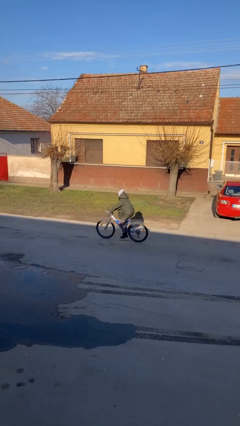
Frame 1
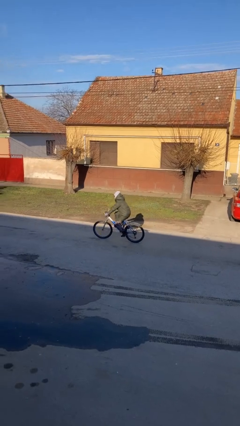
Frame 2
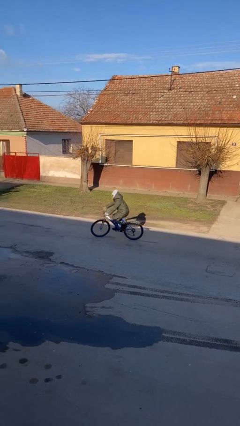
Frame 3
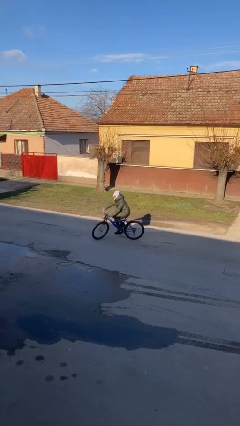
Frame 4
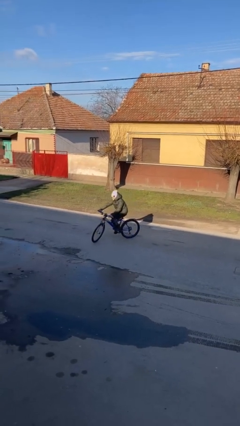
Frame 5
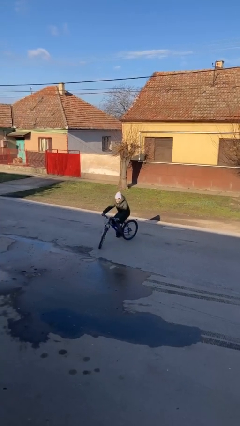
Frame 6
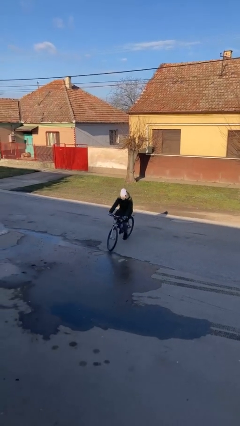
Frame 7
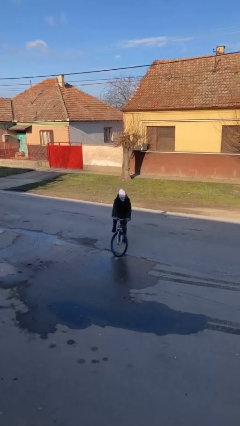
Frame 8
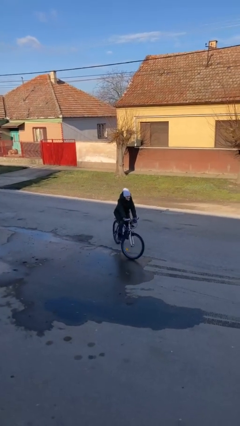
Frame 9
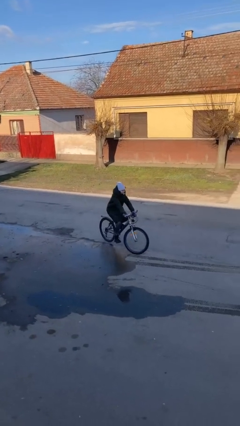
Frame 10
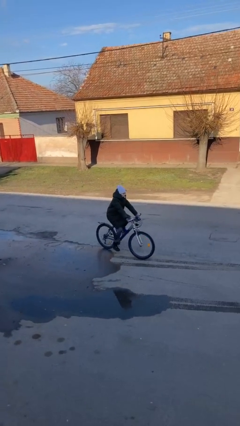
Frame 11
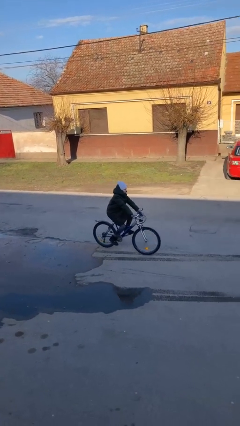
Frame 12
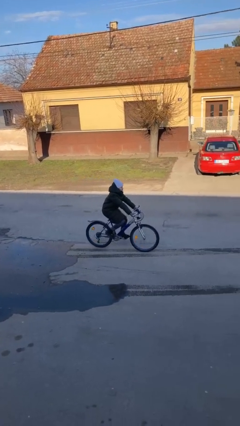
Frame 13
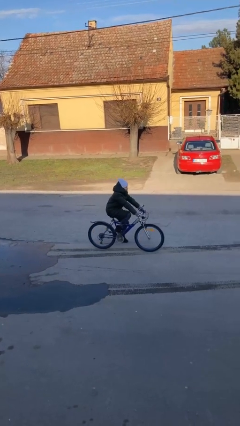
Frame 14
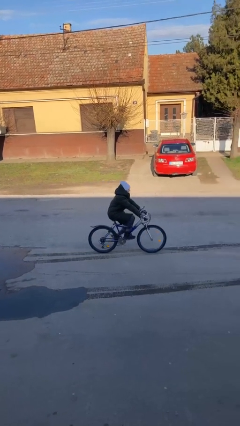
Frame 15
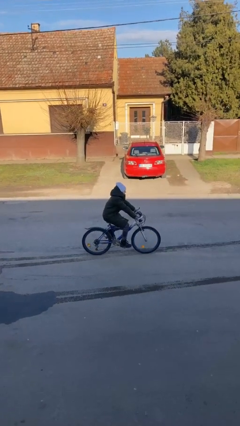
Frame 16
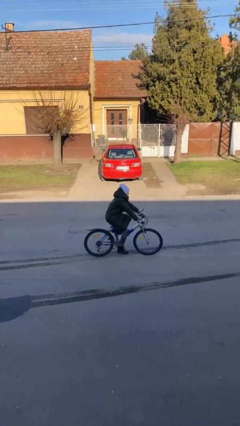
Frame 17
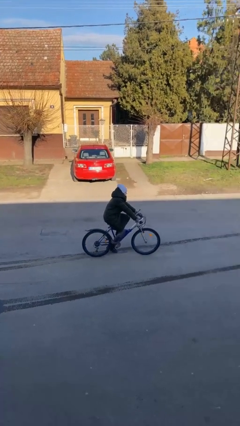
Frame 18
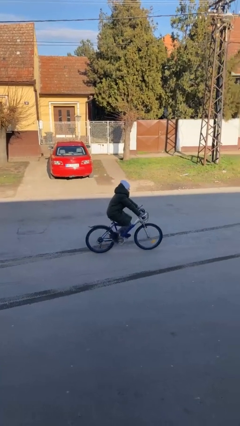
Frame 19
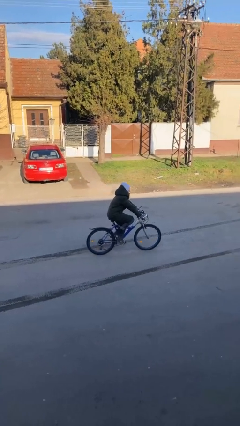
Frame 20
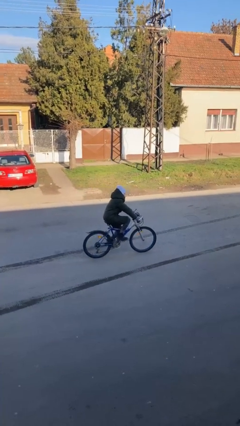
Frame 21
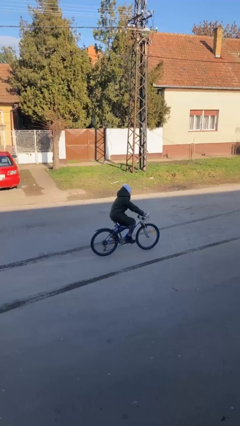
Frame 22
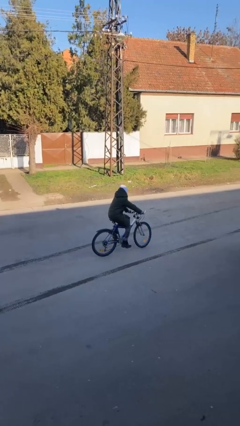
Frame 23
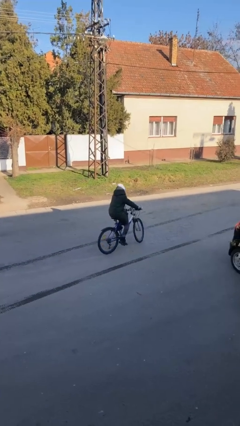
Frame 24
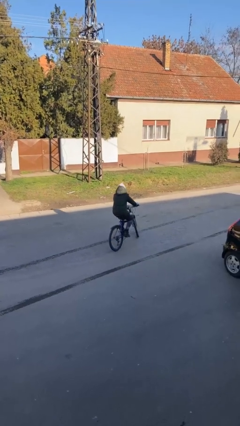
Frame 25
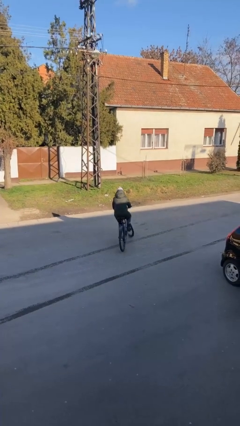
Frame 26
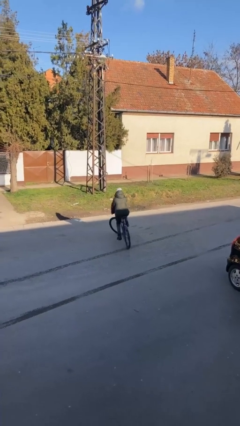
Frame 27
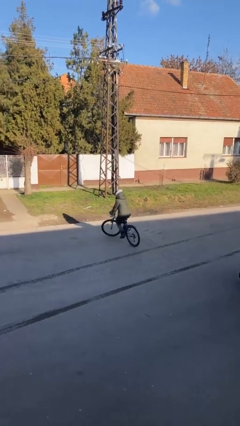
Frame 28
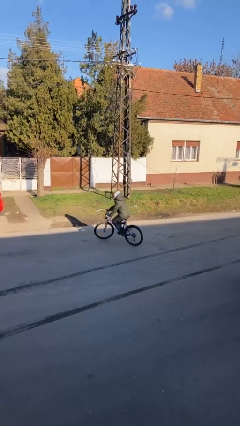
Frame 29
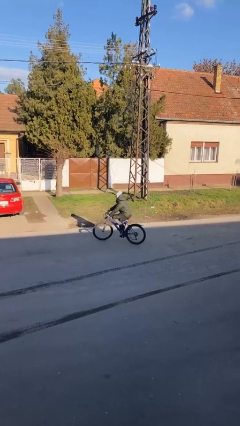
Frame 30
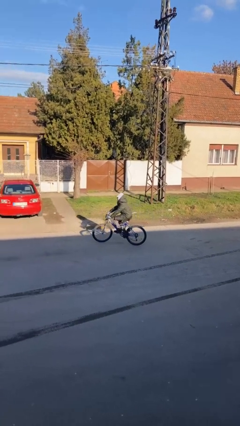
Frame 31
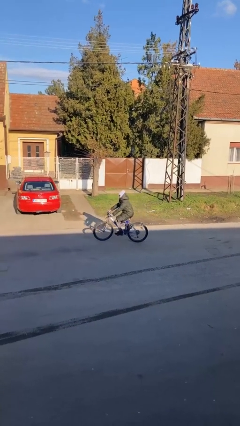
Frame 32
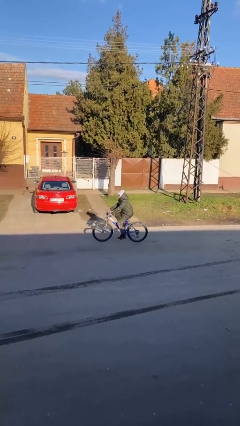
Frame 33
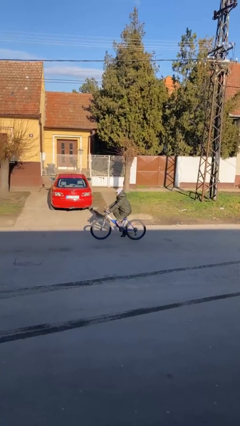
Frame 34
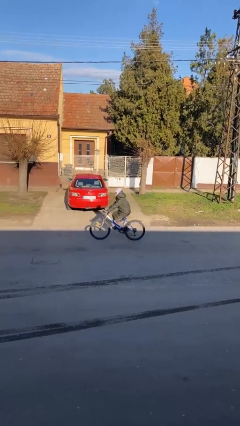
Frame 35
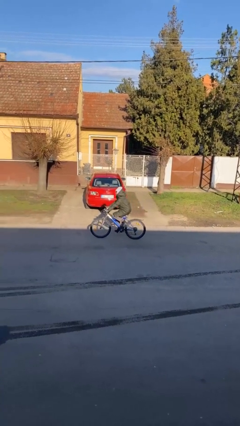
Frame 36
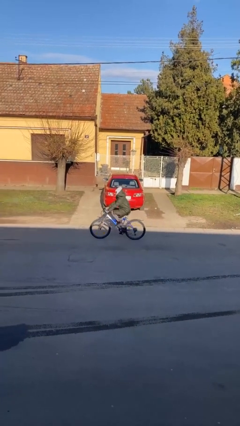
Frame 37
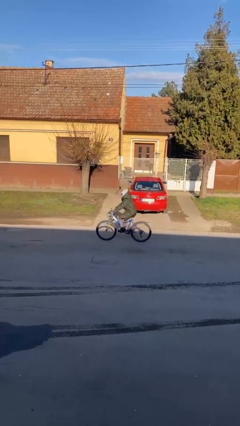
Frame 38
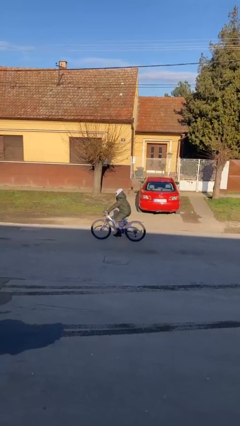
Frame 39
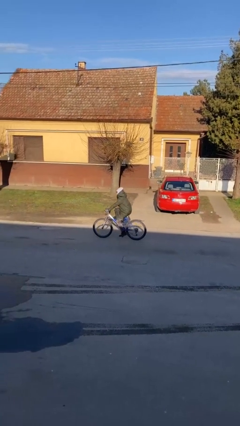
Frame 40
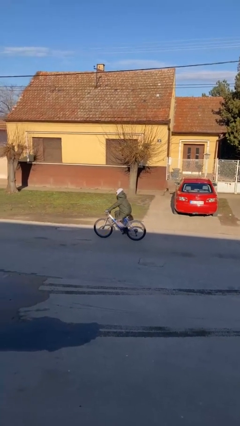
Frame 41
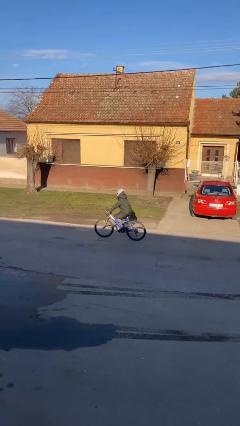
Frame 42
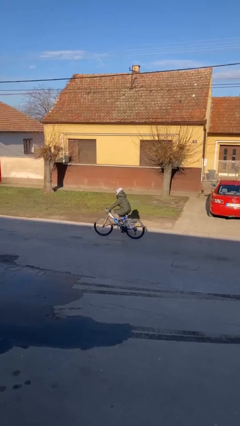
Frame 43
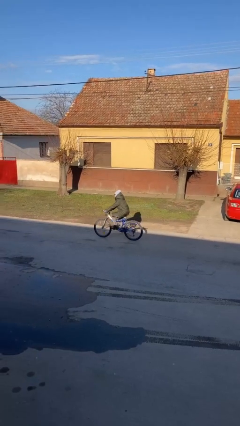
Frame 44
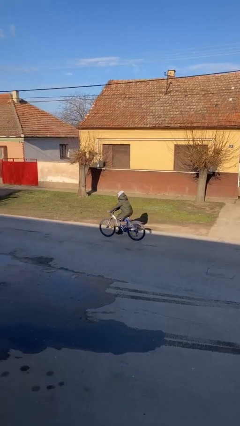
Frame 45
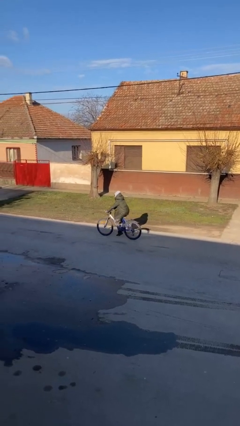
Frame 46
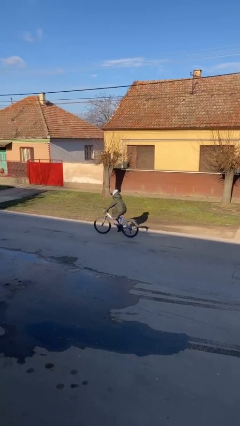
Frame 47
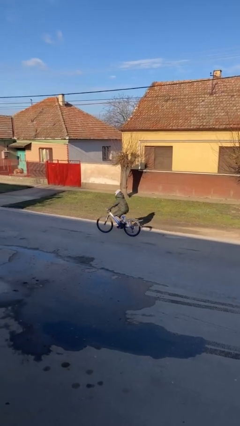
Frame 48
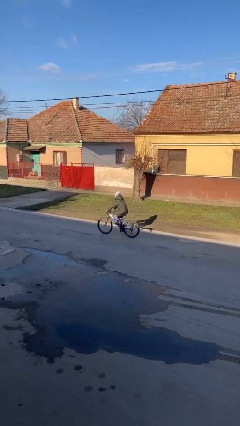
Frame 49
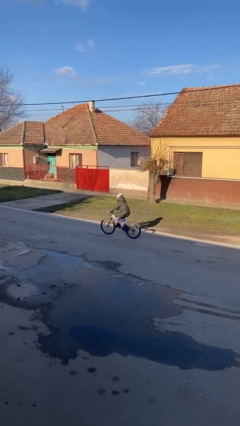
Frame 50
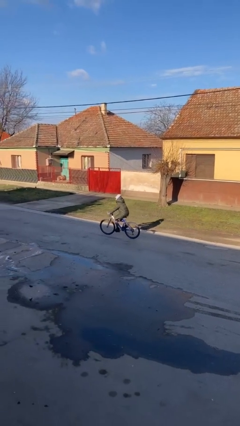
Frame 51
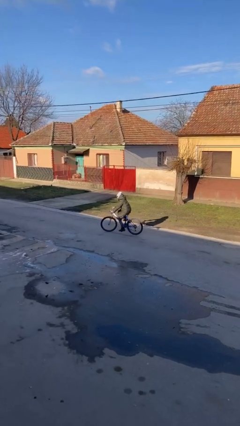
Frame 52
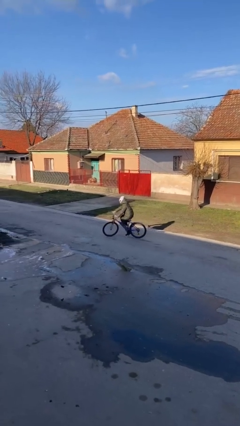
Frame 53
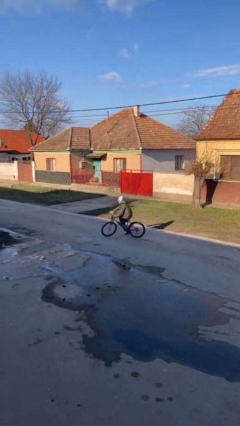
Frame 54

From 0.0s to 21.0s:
person rides bicycle

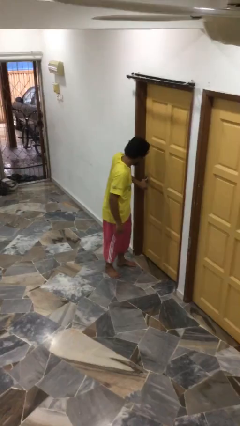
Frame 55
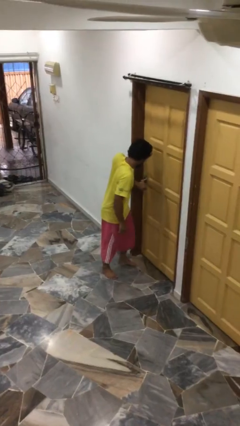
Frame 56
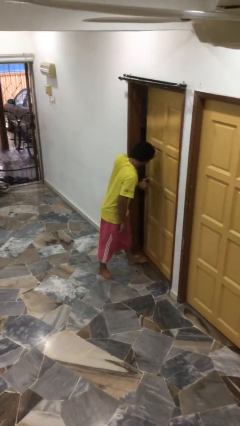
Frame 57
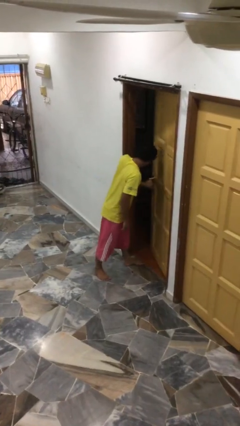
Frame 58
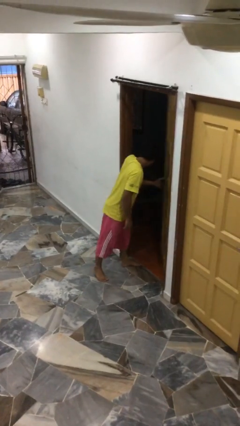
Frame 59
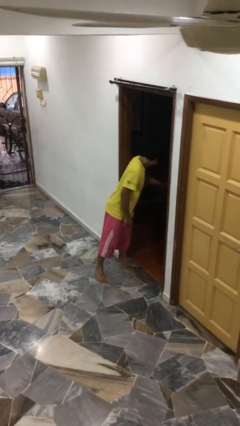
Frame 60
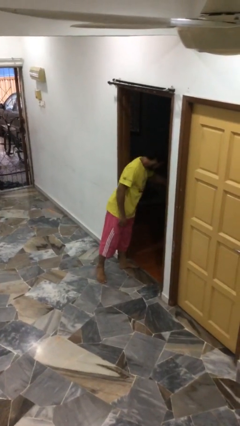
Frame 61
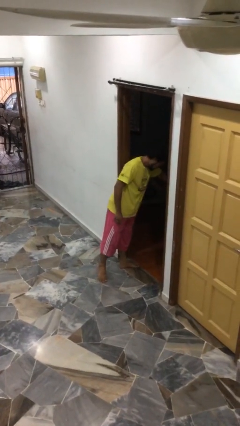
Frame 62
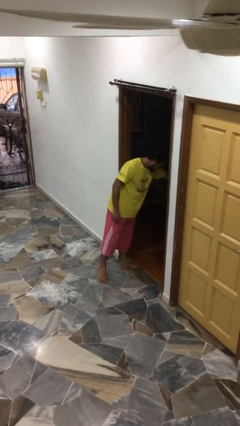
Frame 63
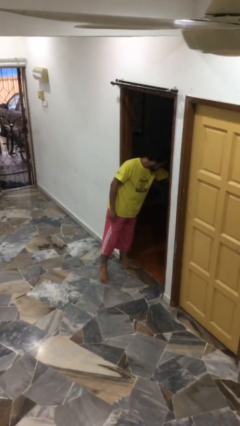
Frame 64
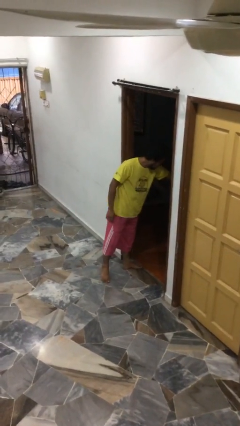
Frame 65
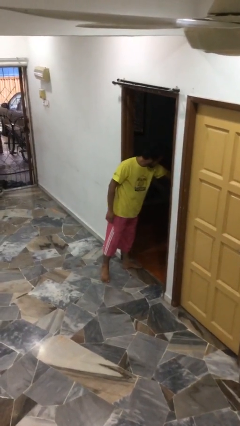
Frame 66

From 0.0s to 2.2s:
person opens facility door

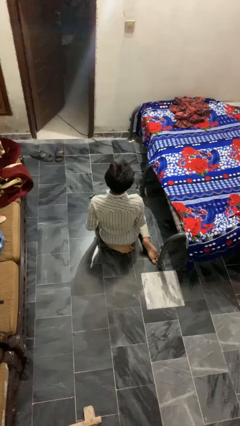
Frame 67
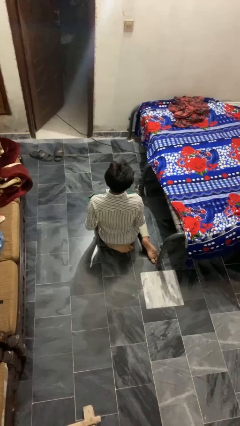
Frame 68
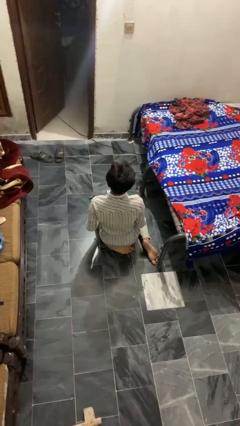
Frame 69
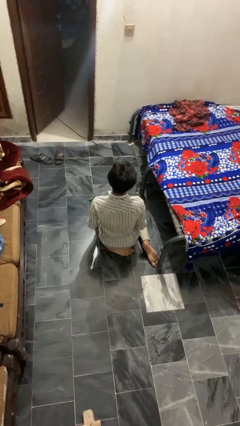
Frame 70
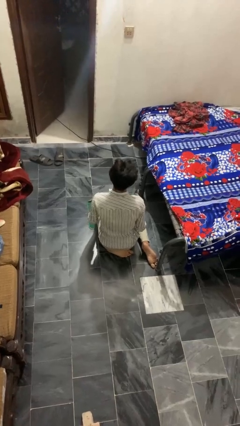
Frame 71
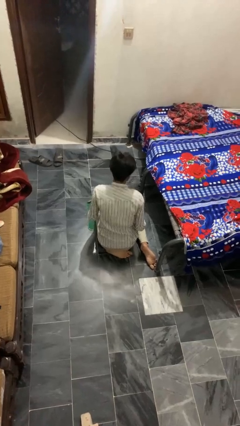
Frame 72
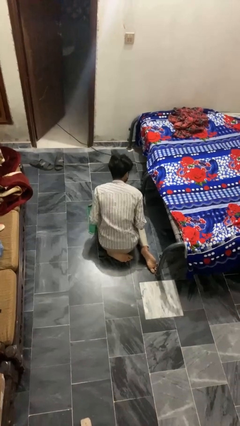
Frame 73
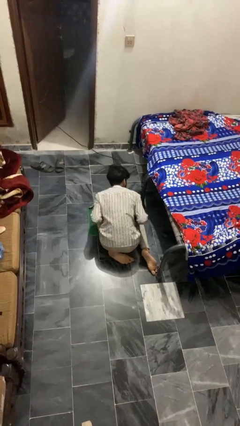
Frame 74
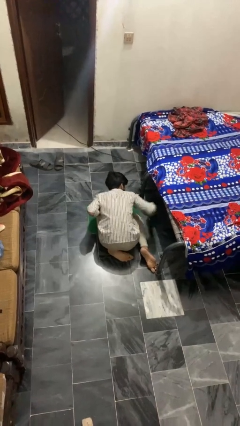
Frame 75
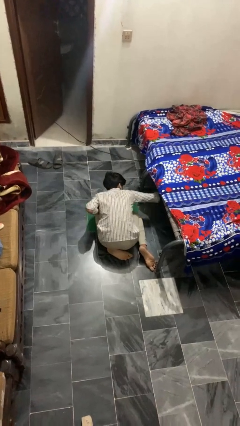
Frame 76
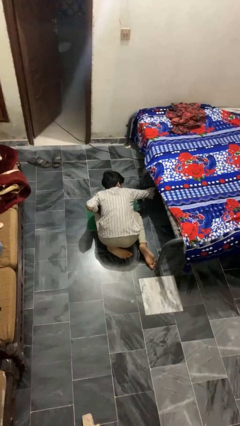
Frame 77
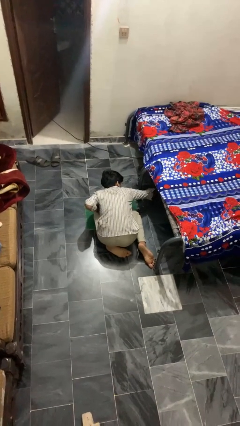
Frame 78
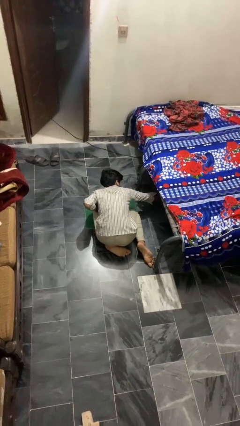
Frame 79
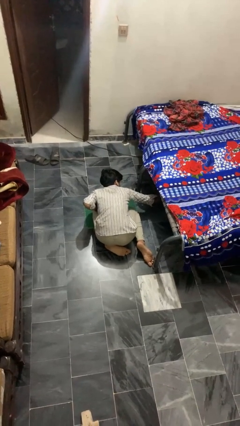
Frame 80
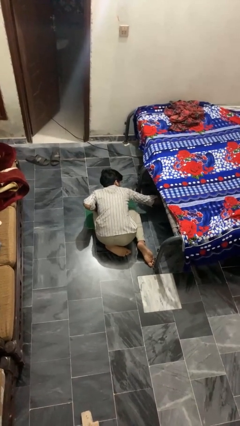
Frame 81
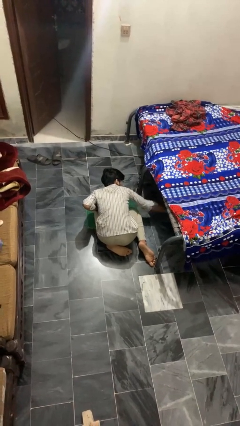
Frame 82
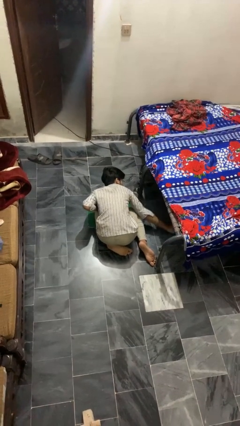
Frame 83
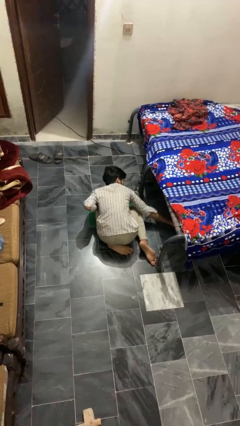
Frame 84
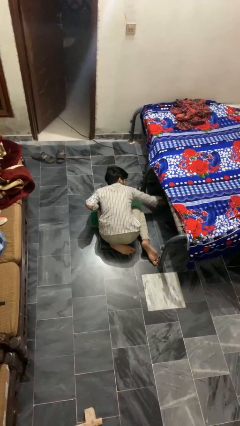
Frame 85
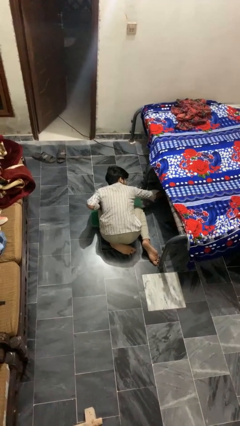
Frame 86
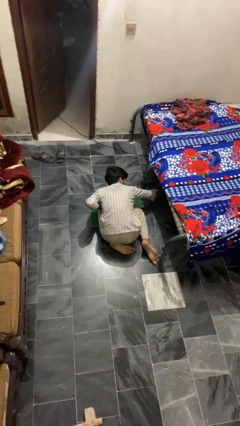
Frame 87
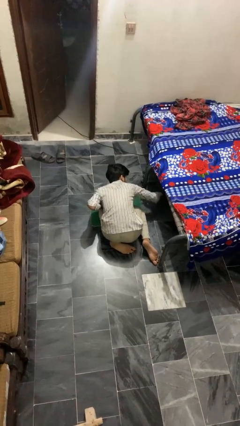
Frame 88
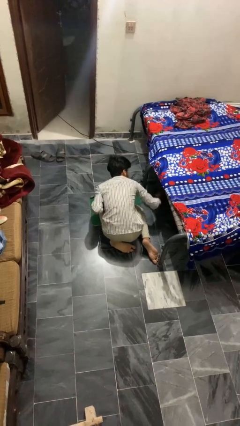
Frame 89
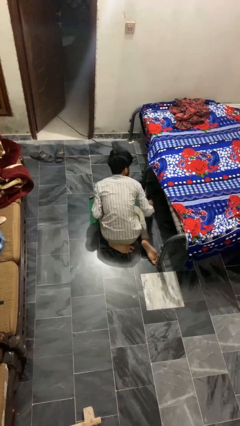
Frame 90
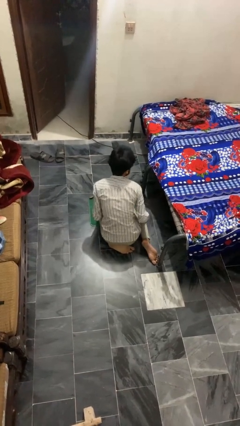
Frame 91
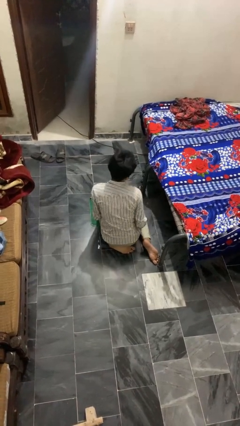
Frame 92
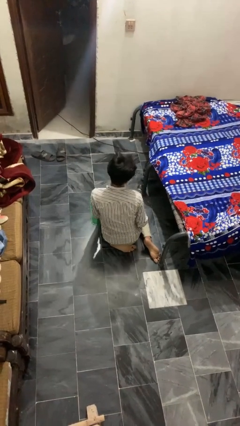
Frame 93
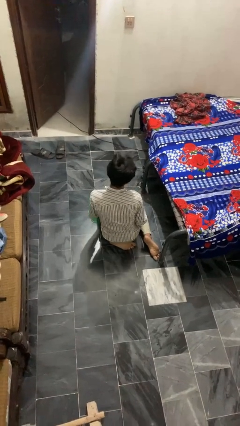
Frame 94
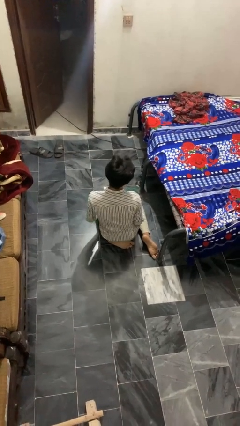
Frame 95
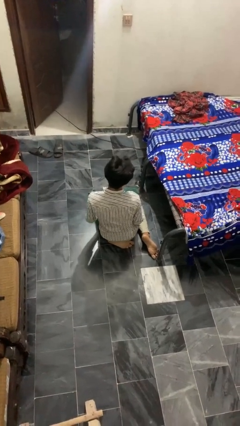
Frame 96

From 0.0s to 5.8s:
person searches under bed
